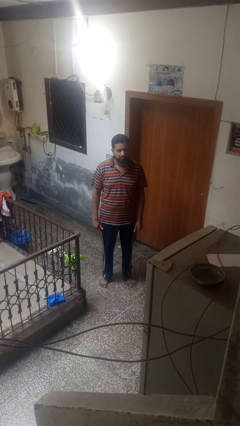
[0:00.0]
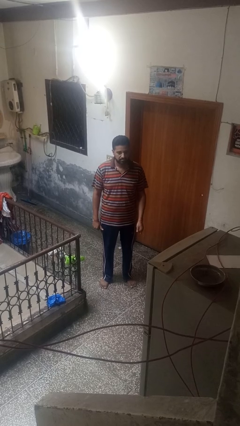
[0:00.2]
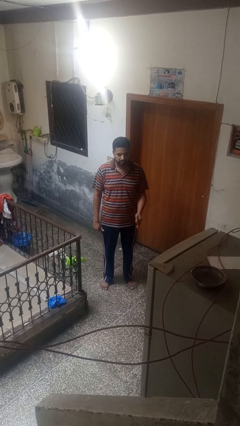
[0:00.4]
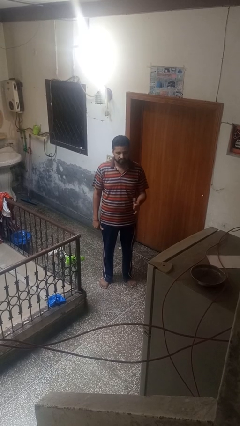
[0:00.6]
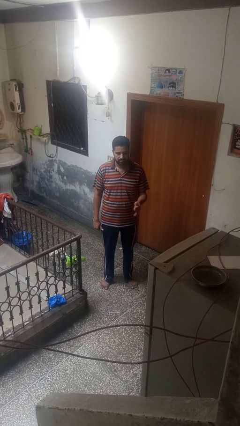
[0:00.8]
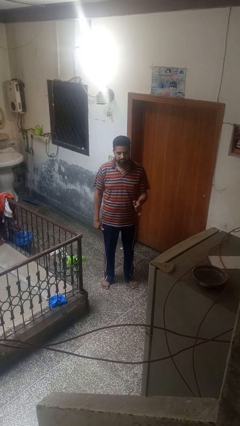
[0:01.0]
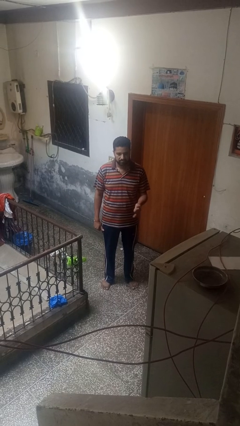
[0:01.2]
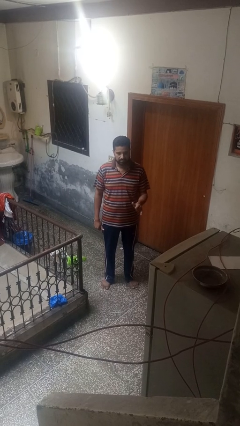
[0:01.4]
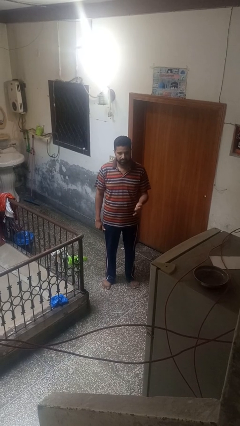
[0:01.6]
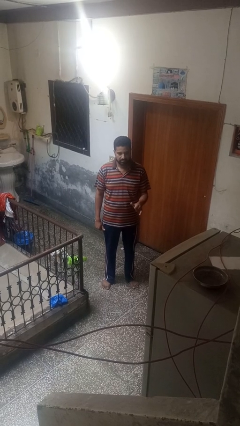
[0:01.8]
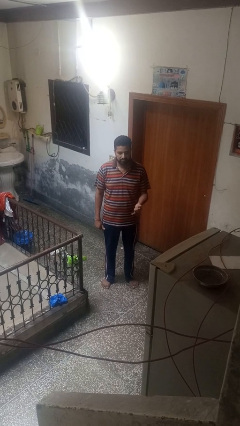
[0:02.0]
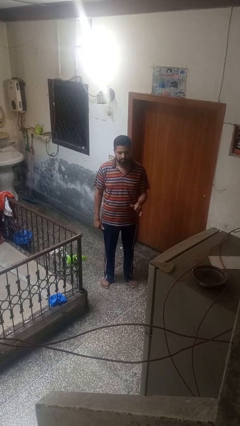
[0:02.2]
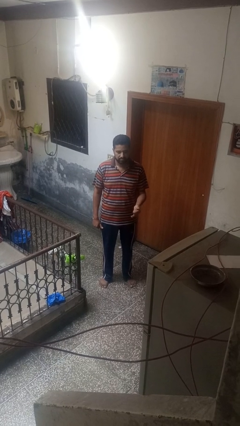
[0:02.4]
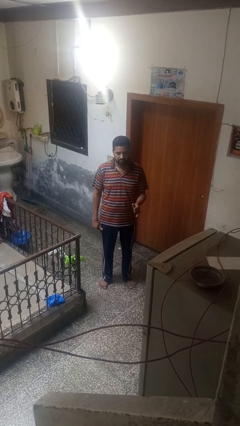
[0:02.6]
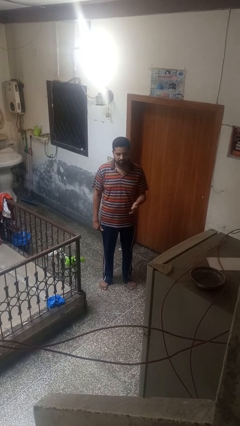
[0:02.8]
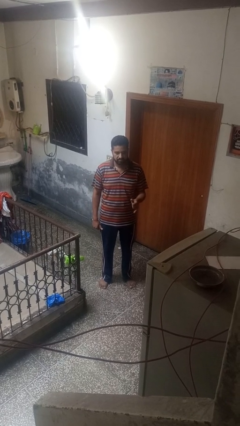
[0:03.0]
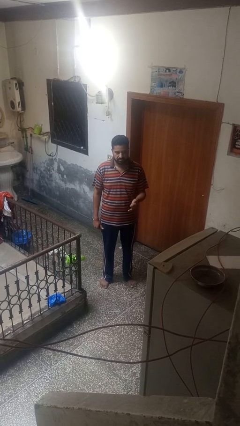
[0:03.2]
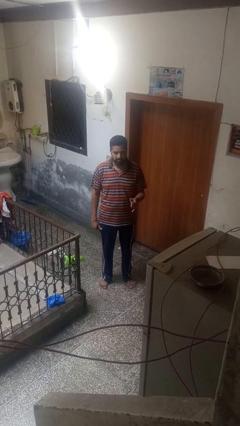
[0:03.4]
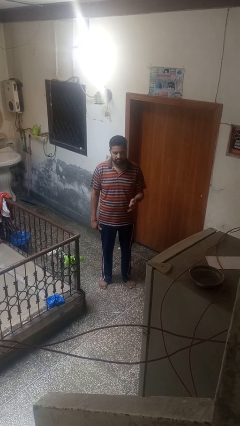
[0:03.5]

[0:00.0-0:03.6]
person gestures hang loose

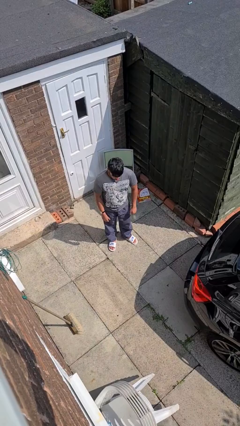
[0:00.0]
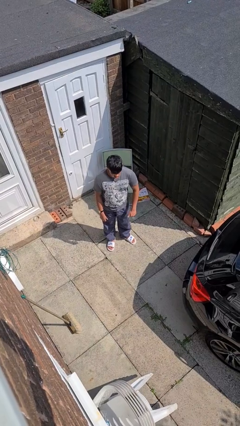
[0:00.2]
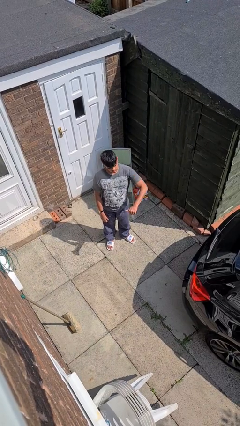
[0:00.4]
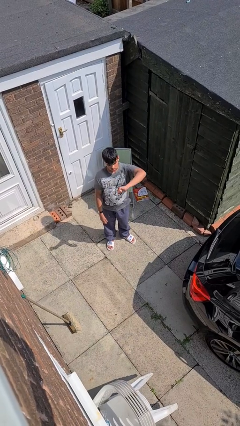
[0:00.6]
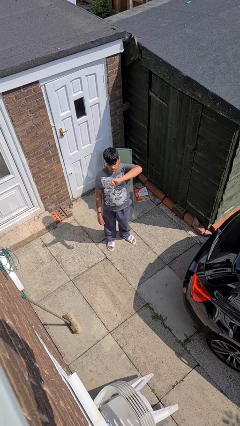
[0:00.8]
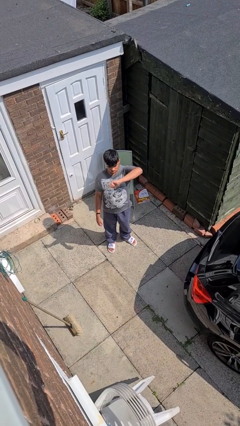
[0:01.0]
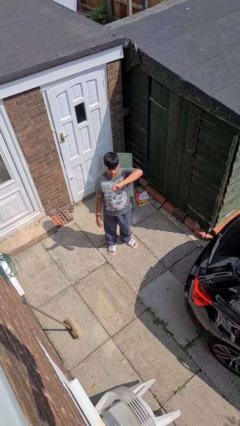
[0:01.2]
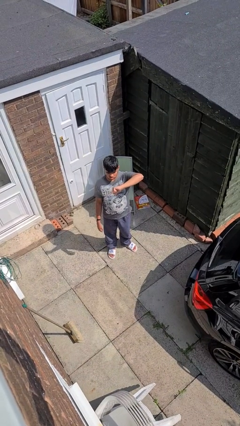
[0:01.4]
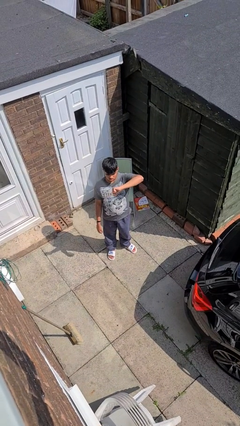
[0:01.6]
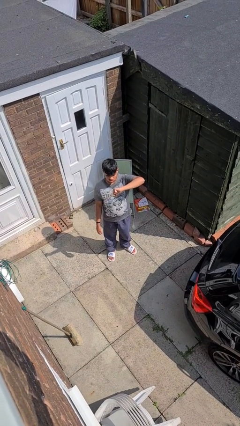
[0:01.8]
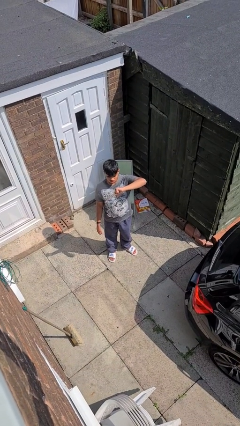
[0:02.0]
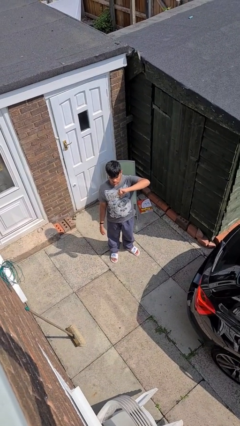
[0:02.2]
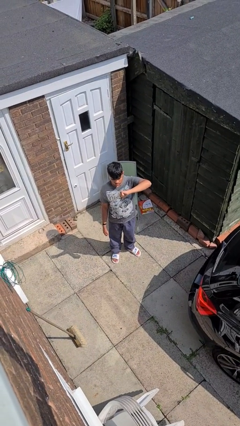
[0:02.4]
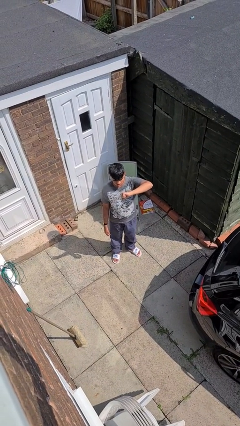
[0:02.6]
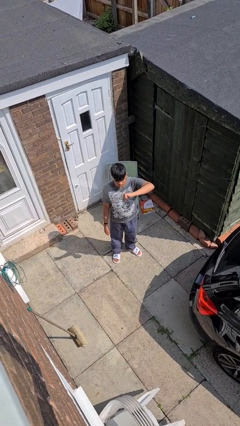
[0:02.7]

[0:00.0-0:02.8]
person gestures thumbs down

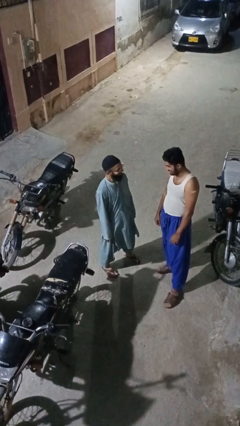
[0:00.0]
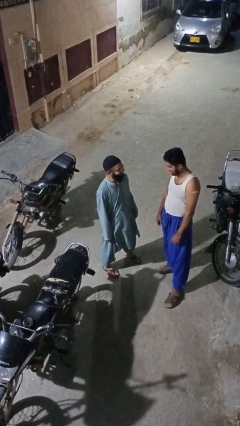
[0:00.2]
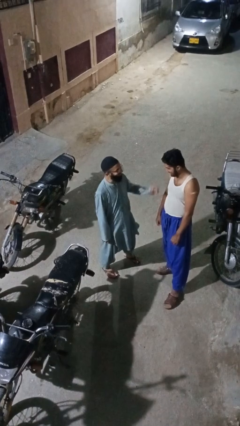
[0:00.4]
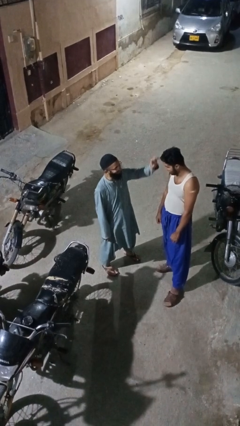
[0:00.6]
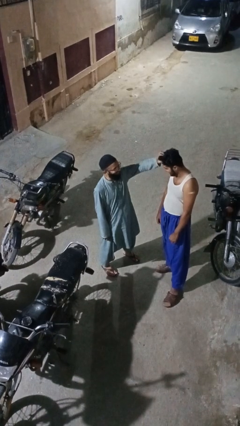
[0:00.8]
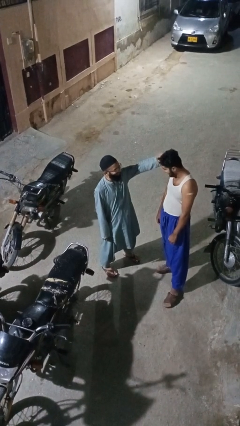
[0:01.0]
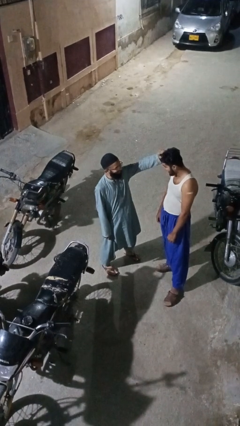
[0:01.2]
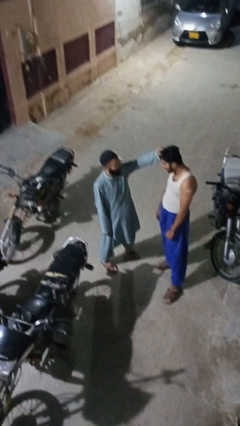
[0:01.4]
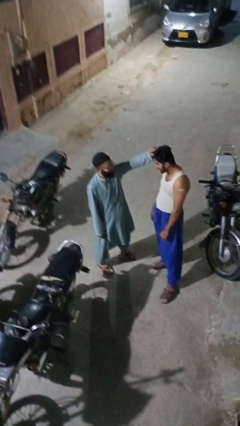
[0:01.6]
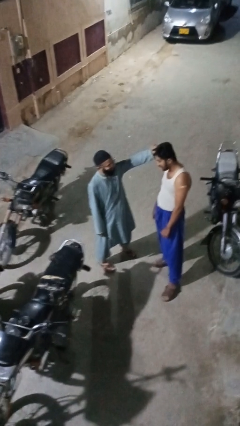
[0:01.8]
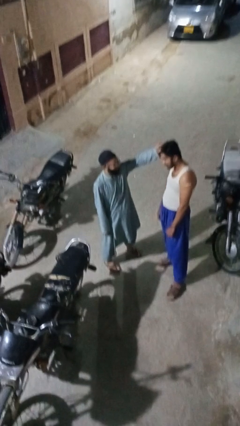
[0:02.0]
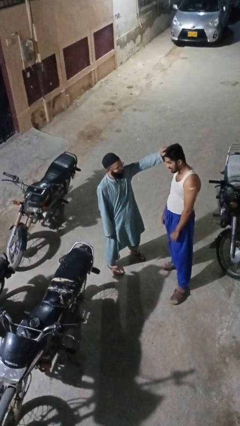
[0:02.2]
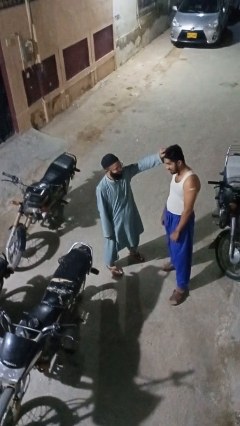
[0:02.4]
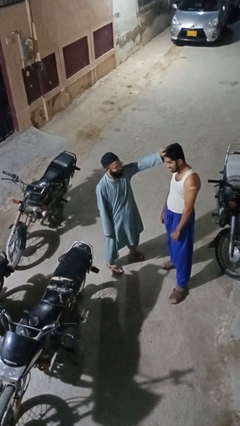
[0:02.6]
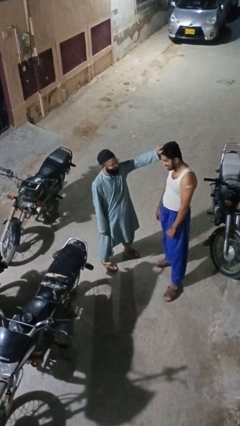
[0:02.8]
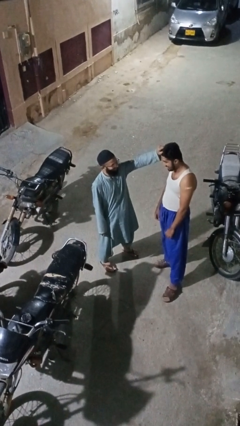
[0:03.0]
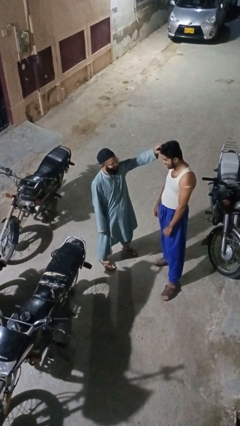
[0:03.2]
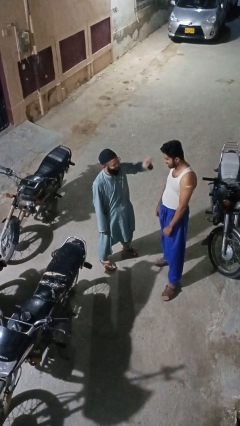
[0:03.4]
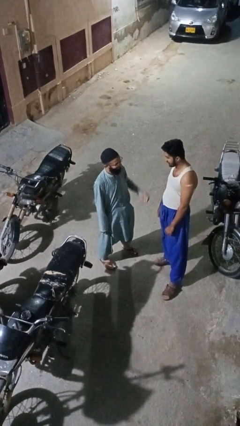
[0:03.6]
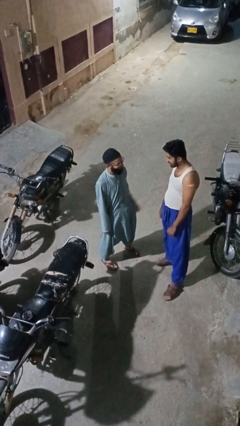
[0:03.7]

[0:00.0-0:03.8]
person grabs person by hair

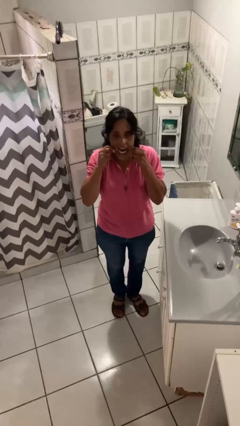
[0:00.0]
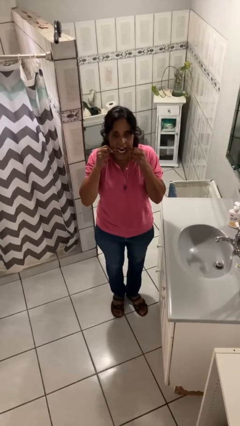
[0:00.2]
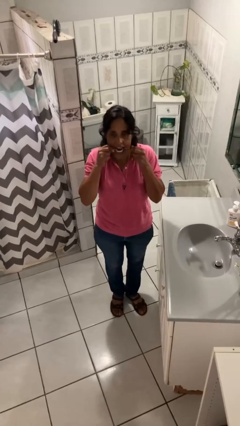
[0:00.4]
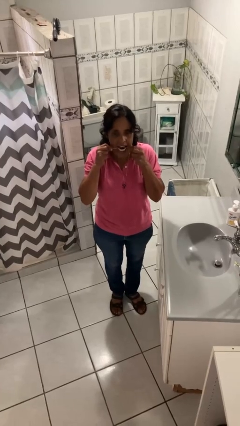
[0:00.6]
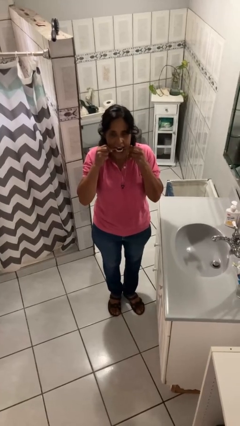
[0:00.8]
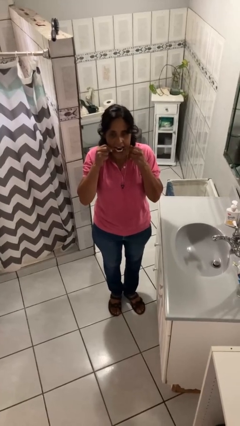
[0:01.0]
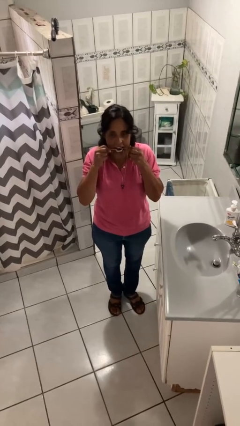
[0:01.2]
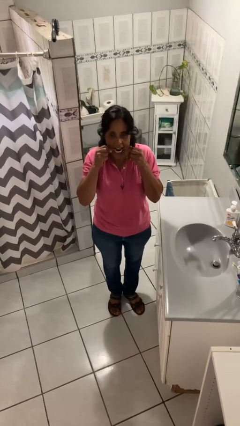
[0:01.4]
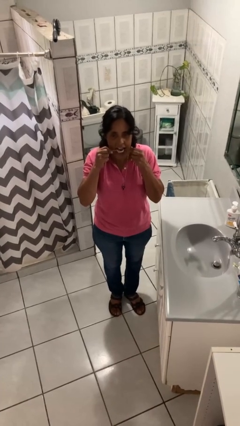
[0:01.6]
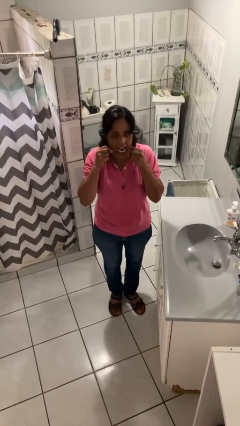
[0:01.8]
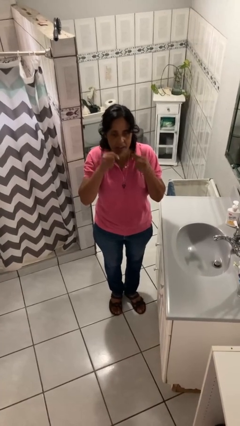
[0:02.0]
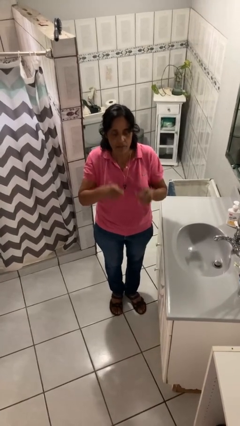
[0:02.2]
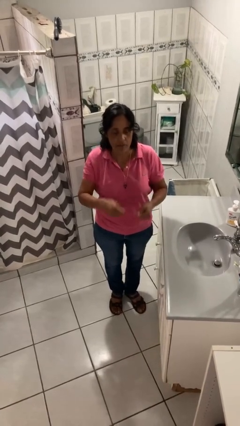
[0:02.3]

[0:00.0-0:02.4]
person flosses

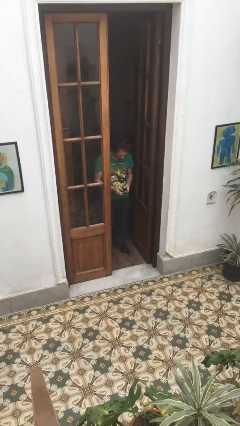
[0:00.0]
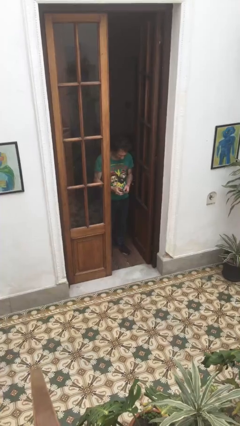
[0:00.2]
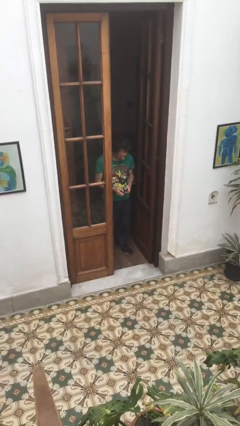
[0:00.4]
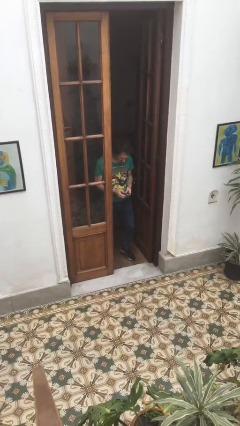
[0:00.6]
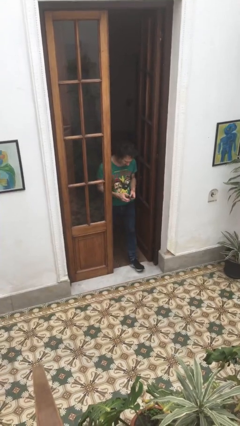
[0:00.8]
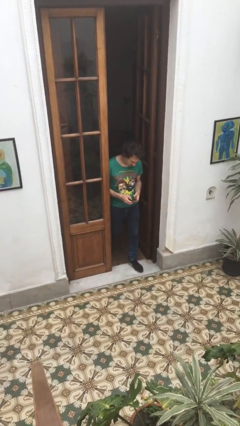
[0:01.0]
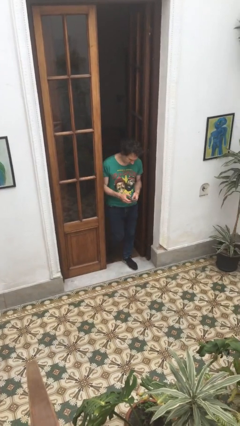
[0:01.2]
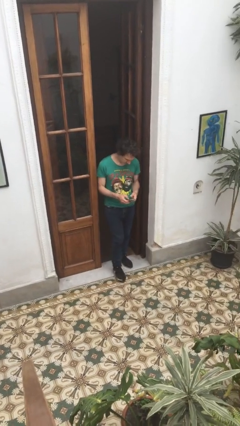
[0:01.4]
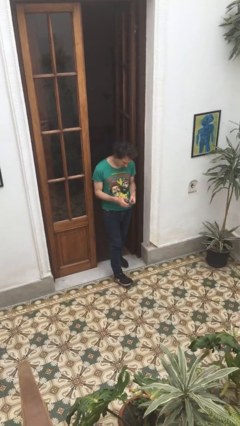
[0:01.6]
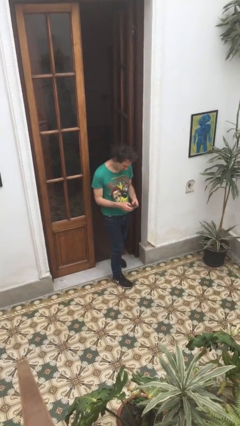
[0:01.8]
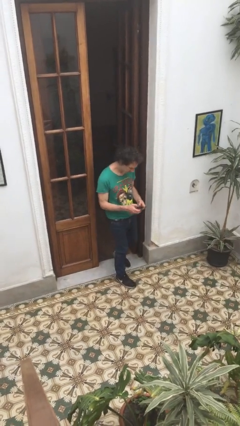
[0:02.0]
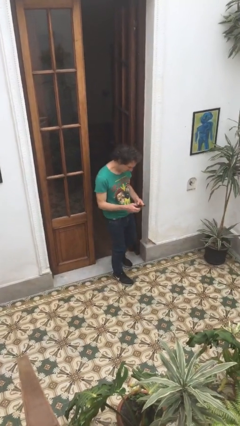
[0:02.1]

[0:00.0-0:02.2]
person enters scene through structure

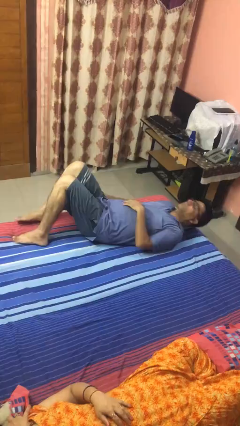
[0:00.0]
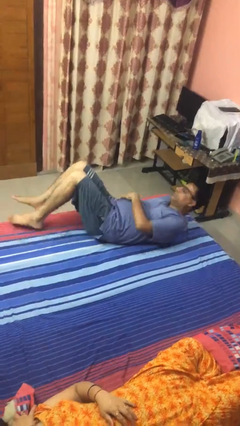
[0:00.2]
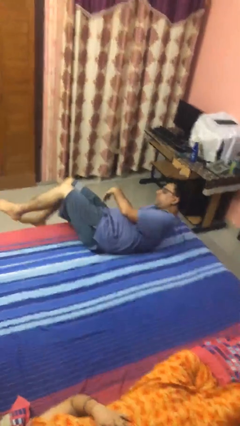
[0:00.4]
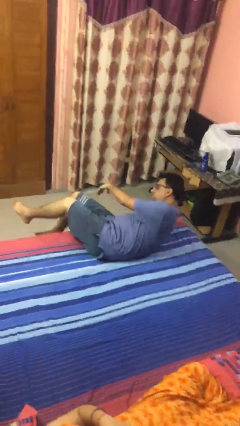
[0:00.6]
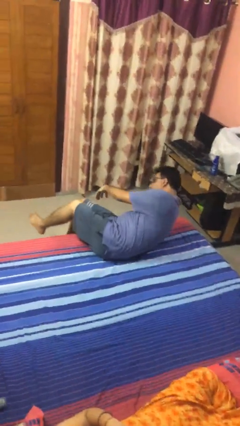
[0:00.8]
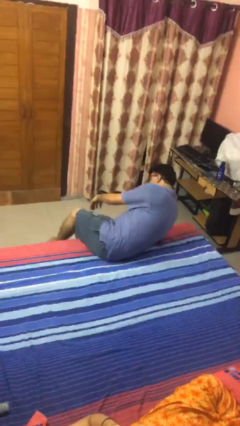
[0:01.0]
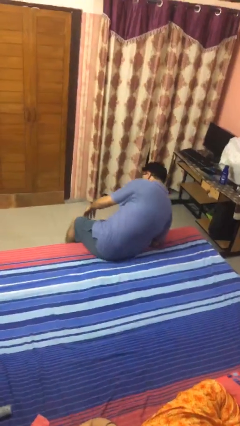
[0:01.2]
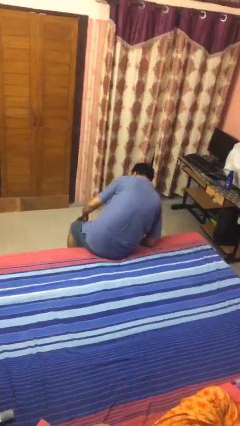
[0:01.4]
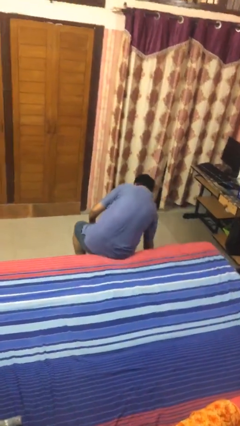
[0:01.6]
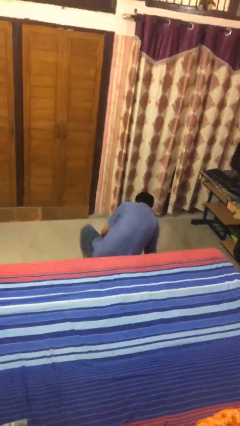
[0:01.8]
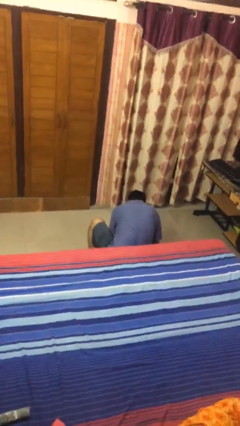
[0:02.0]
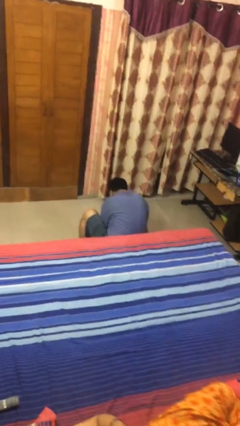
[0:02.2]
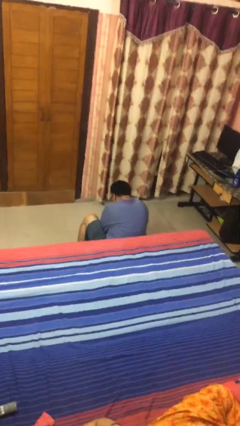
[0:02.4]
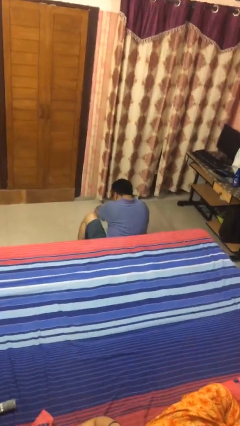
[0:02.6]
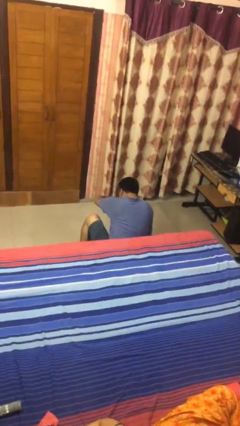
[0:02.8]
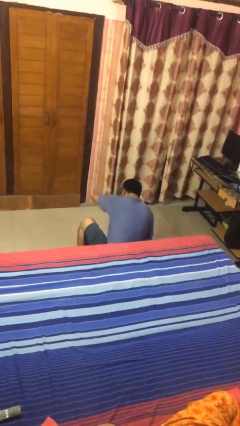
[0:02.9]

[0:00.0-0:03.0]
person falls from bed
